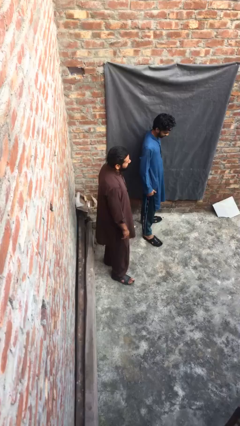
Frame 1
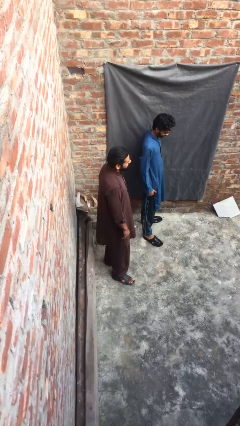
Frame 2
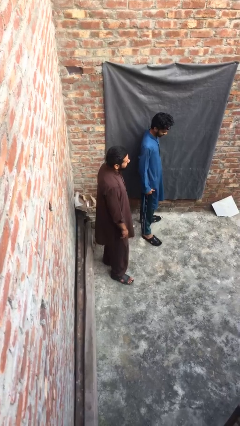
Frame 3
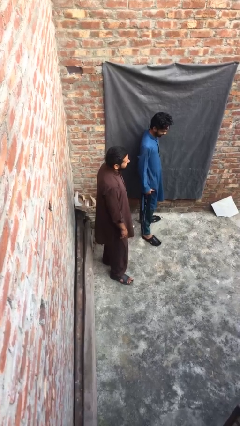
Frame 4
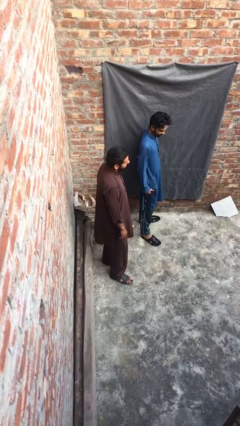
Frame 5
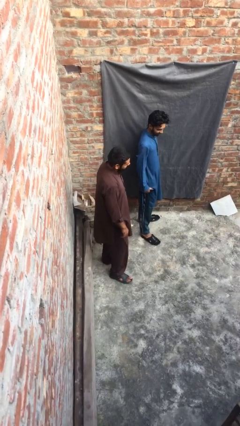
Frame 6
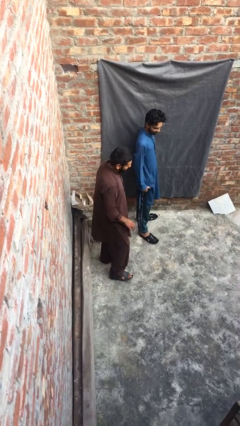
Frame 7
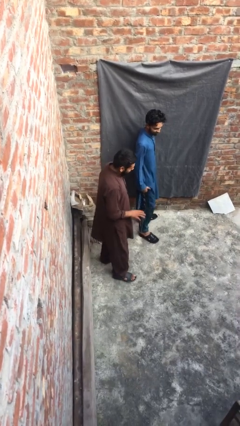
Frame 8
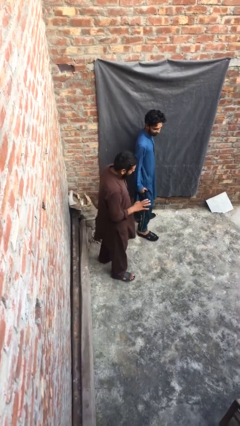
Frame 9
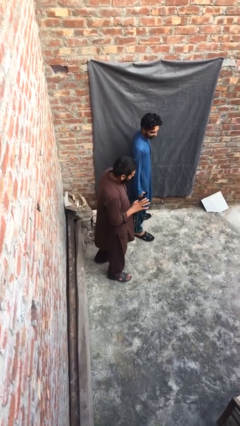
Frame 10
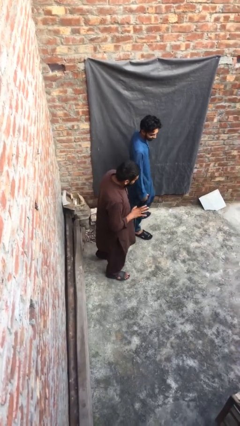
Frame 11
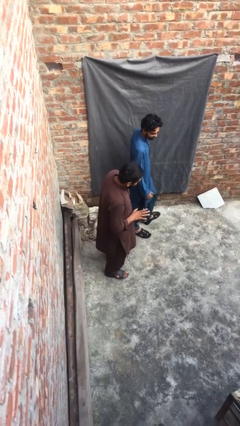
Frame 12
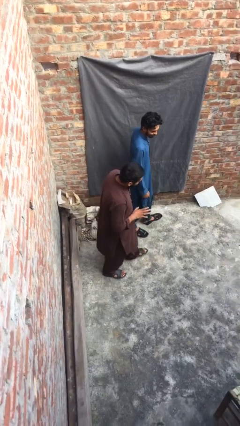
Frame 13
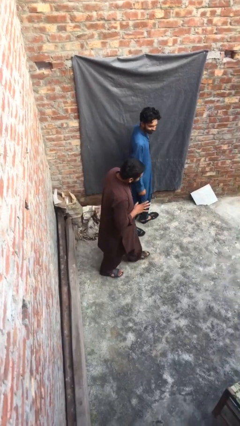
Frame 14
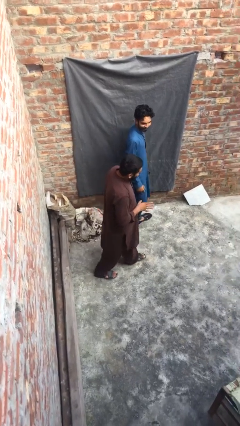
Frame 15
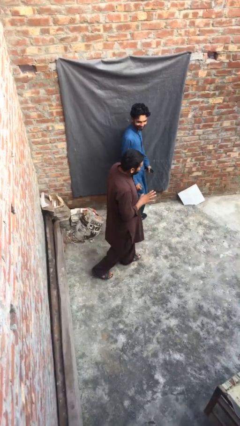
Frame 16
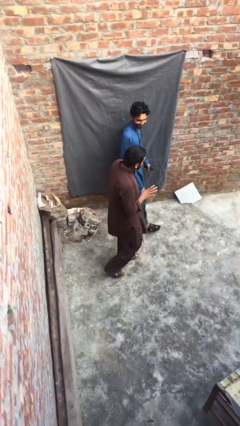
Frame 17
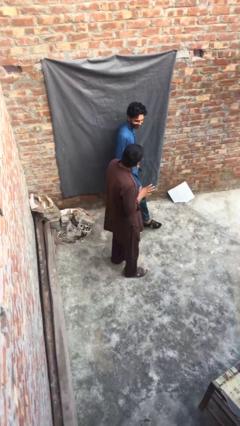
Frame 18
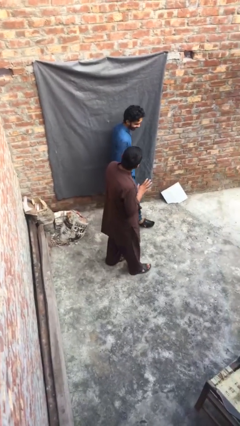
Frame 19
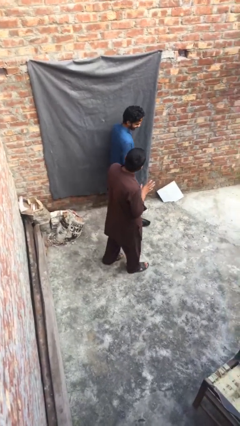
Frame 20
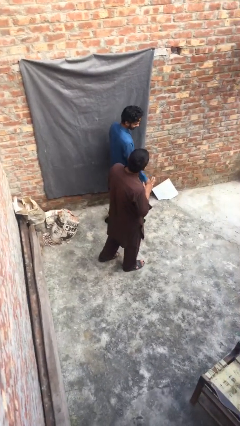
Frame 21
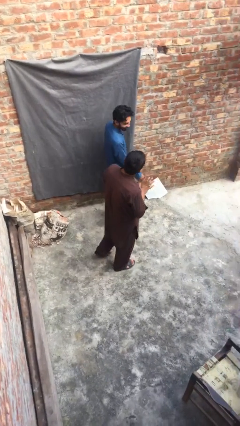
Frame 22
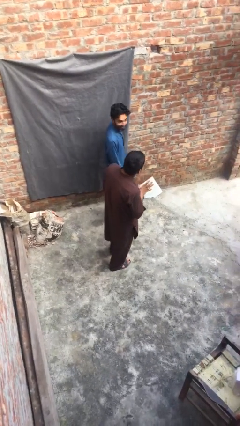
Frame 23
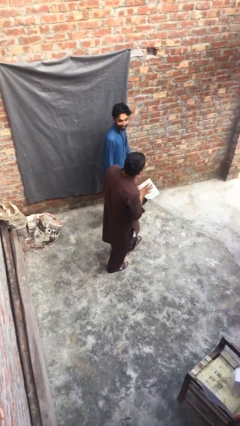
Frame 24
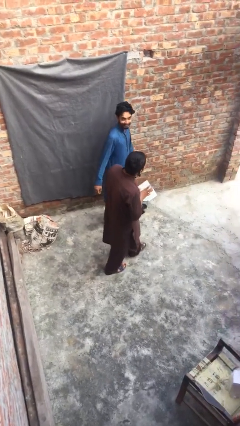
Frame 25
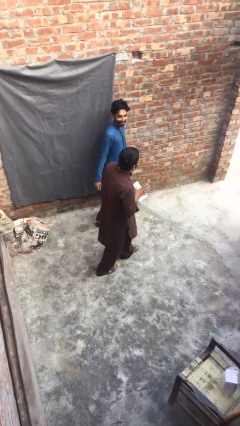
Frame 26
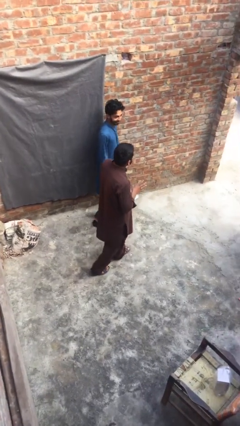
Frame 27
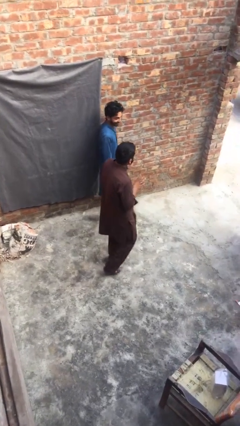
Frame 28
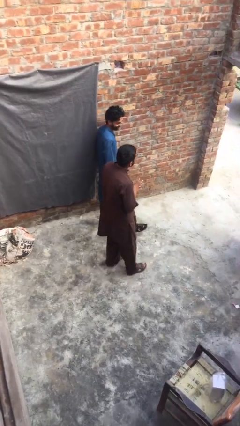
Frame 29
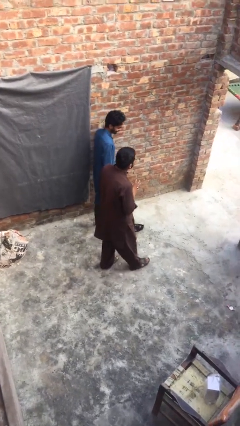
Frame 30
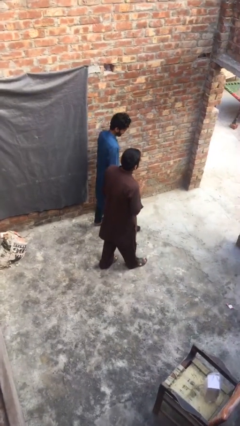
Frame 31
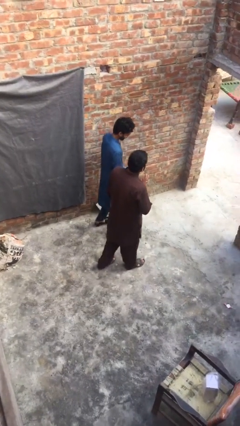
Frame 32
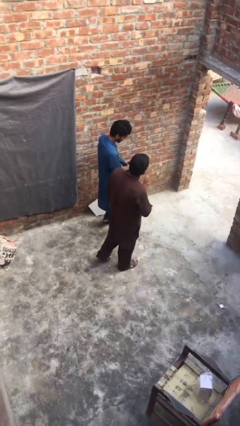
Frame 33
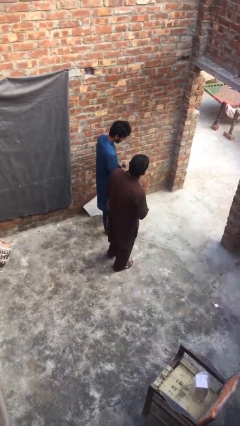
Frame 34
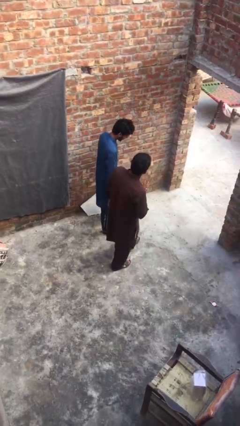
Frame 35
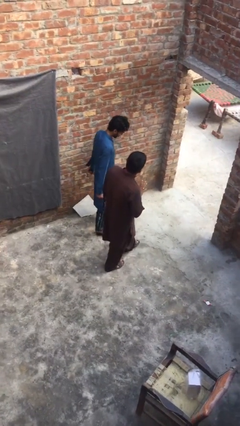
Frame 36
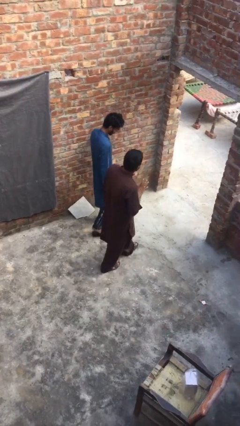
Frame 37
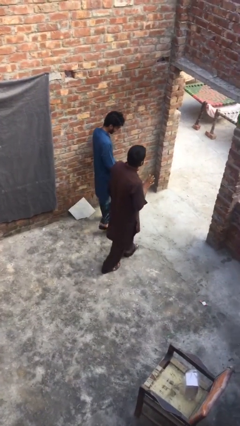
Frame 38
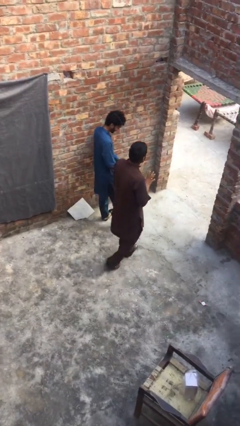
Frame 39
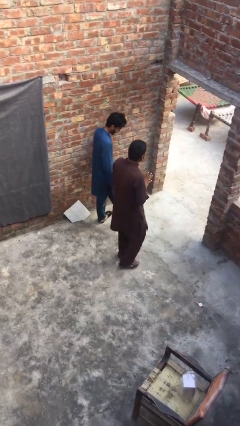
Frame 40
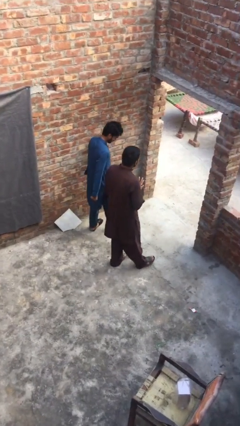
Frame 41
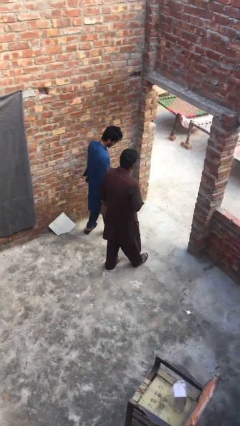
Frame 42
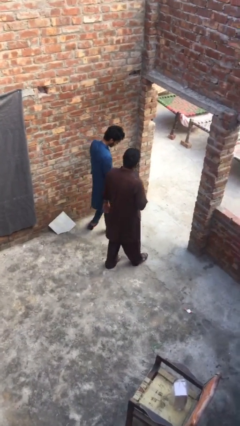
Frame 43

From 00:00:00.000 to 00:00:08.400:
person talks to person

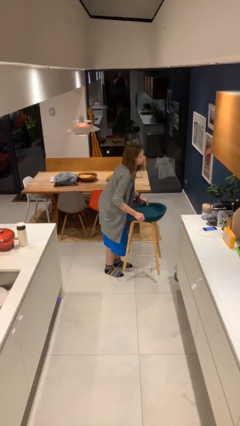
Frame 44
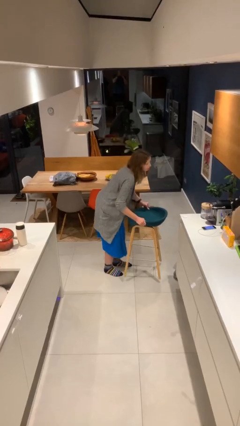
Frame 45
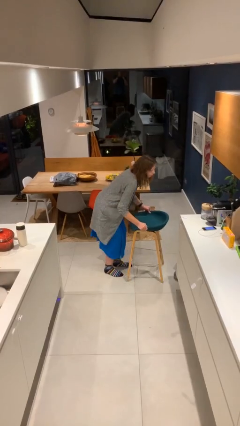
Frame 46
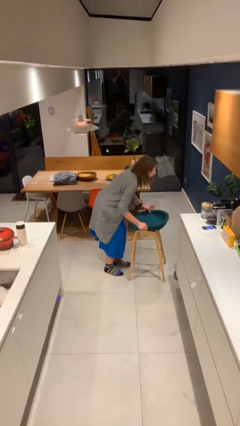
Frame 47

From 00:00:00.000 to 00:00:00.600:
person puts down object on floor

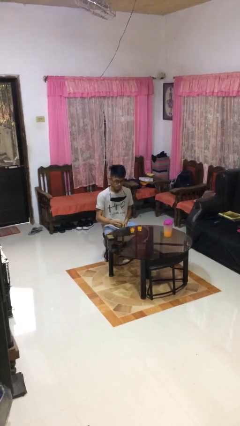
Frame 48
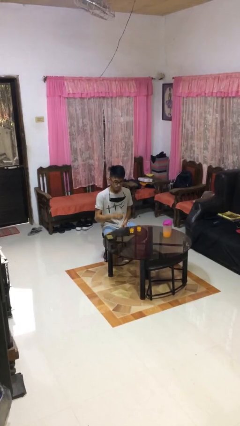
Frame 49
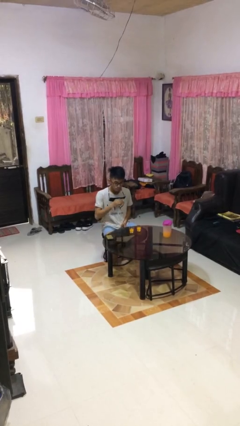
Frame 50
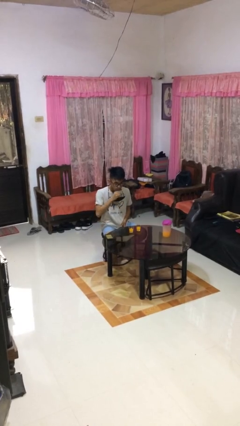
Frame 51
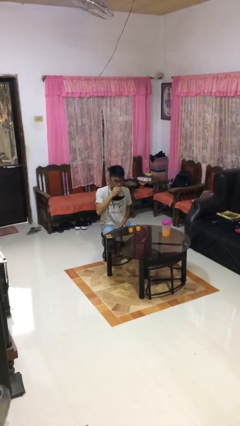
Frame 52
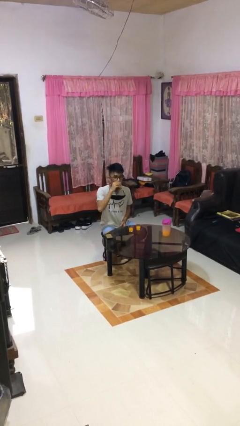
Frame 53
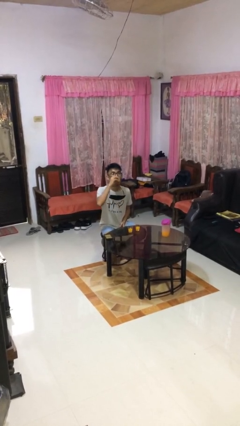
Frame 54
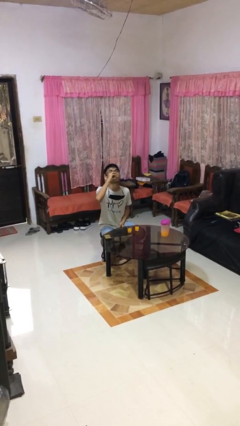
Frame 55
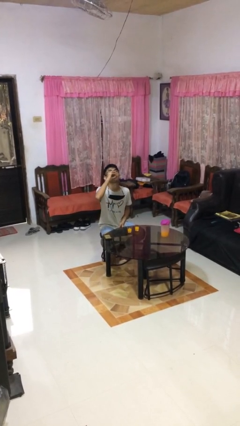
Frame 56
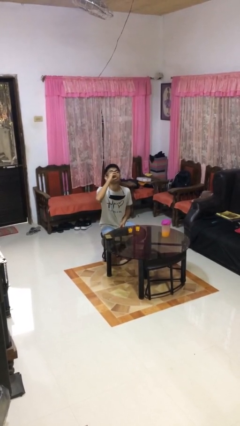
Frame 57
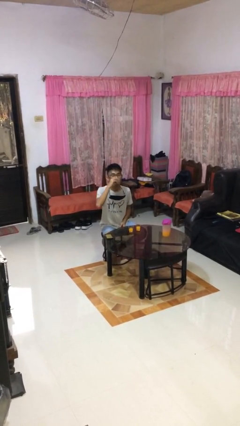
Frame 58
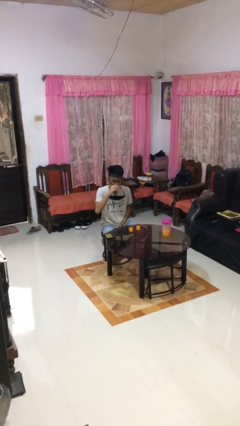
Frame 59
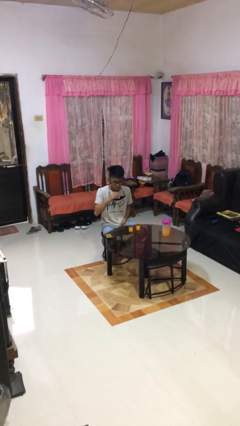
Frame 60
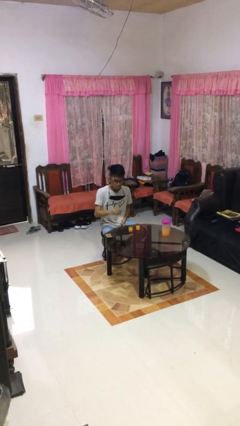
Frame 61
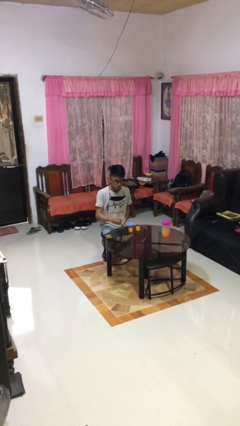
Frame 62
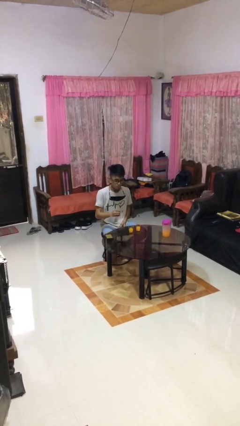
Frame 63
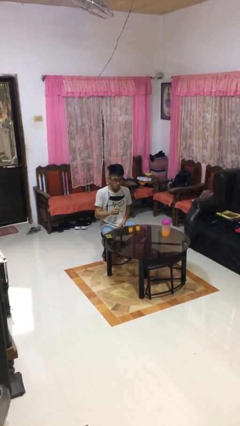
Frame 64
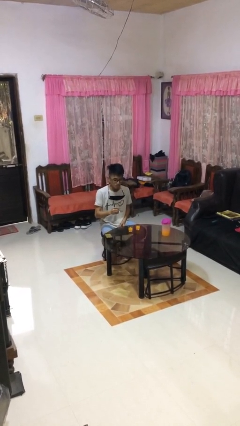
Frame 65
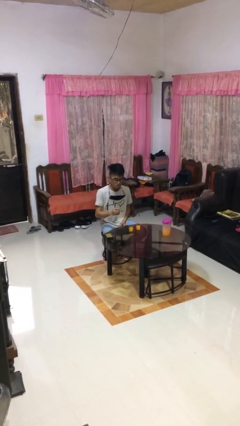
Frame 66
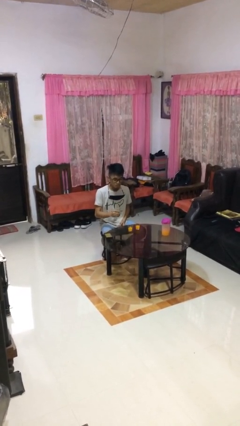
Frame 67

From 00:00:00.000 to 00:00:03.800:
person drinks from shotglass

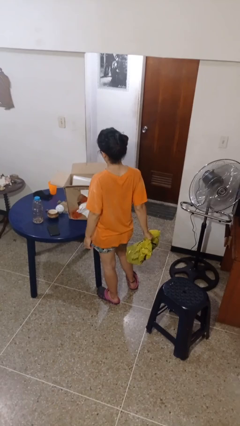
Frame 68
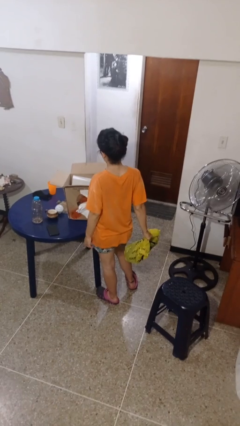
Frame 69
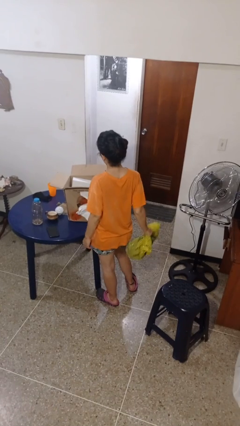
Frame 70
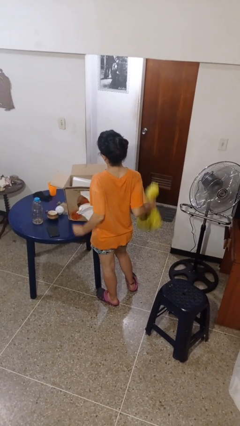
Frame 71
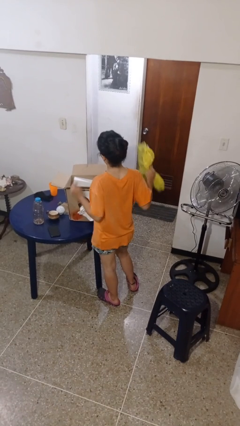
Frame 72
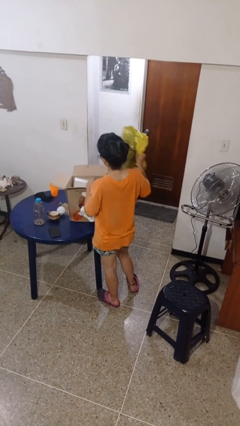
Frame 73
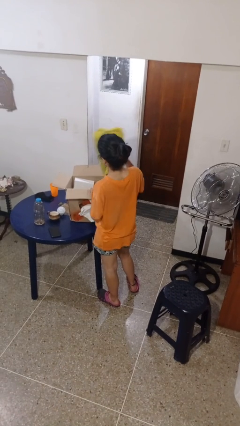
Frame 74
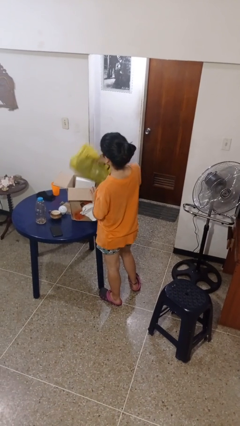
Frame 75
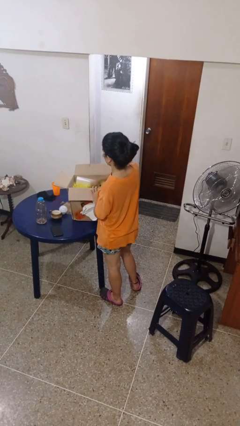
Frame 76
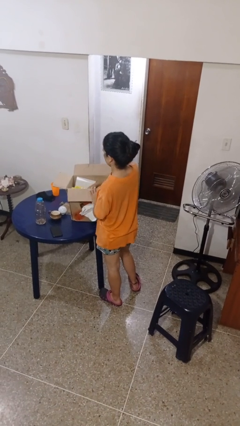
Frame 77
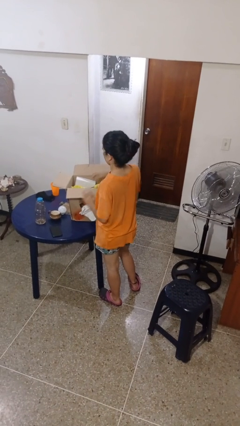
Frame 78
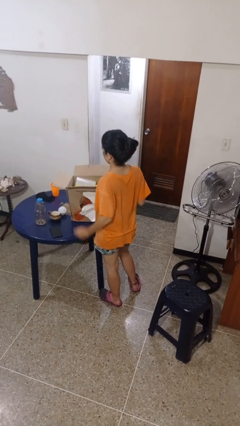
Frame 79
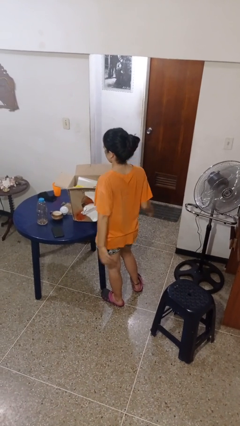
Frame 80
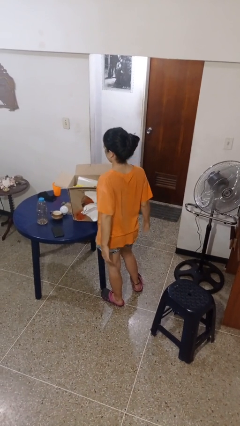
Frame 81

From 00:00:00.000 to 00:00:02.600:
person puts object into box

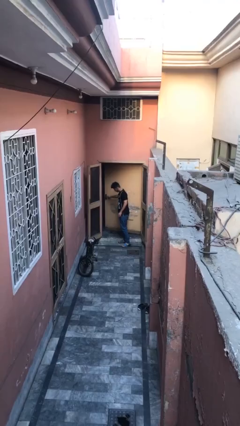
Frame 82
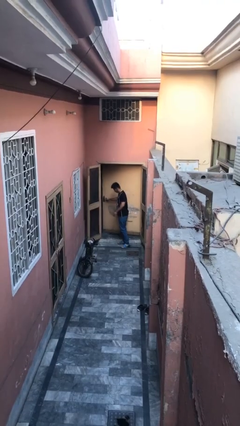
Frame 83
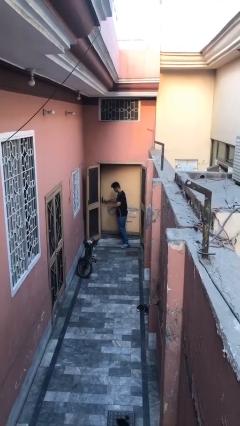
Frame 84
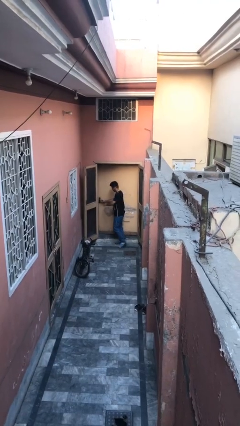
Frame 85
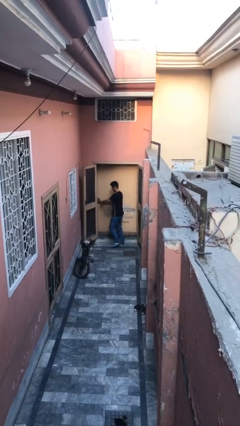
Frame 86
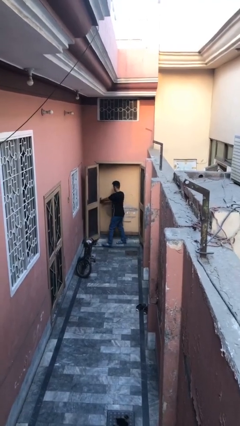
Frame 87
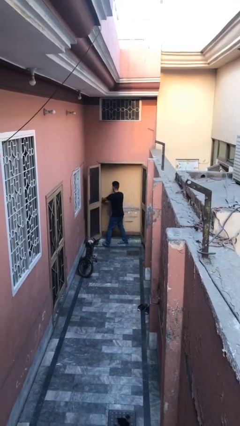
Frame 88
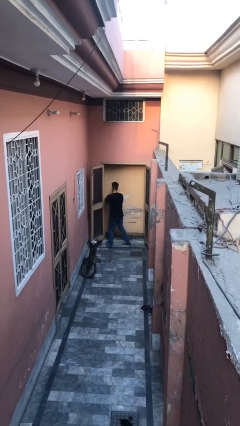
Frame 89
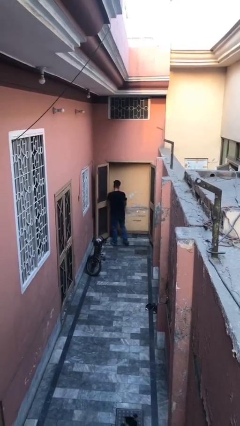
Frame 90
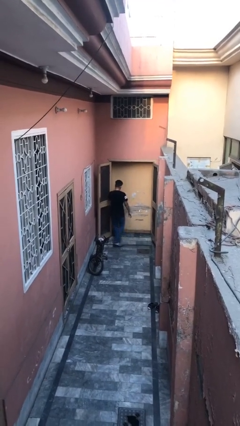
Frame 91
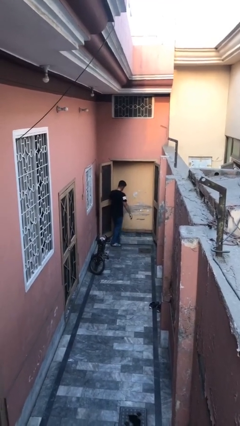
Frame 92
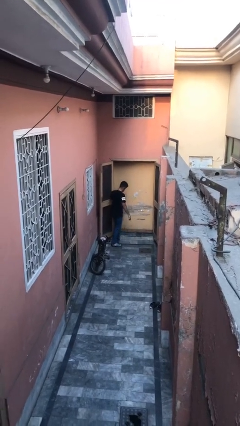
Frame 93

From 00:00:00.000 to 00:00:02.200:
person closes facility door

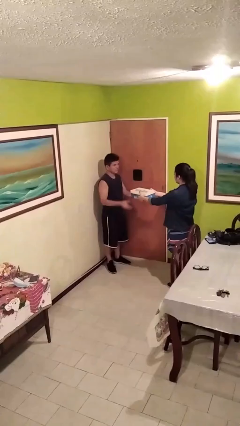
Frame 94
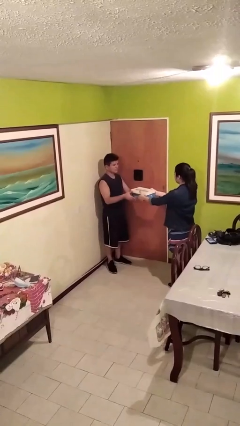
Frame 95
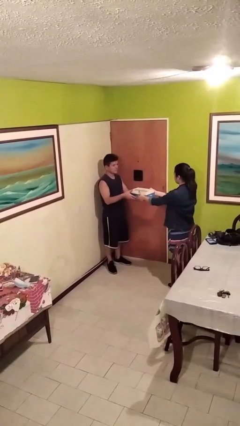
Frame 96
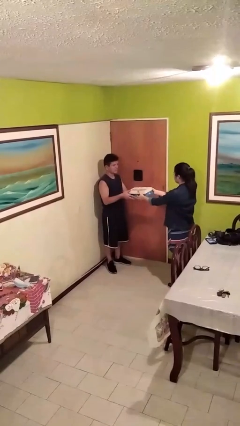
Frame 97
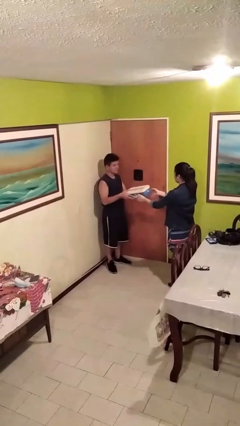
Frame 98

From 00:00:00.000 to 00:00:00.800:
person transfers object to person
